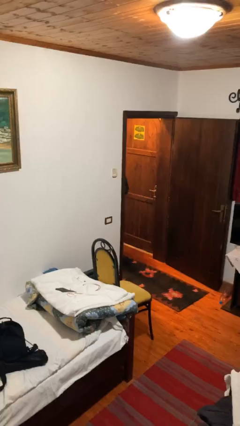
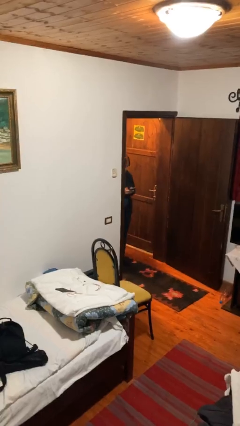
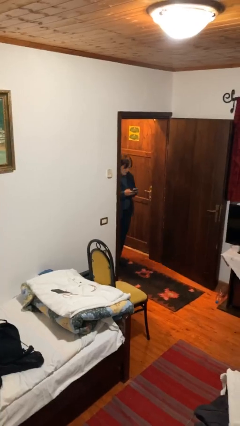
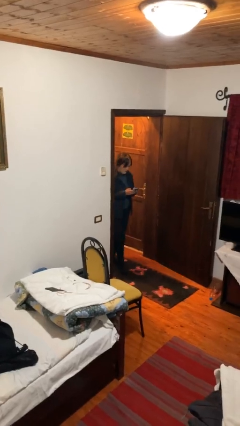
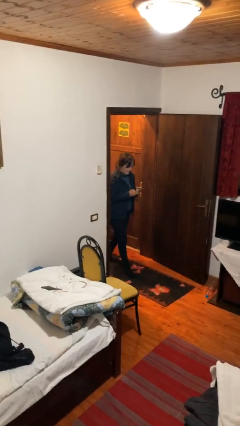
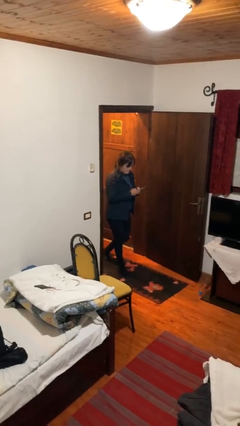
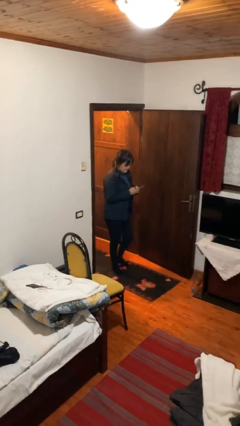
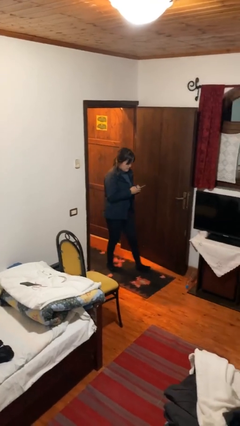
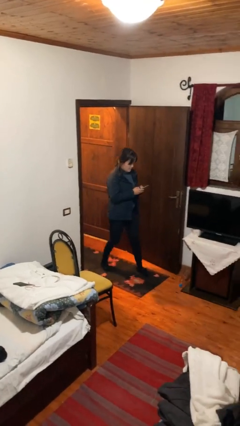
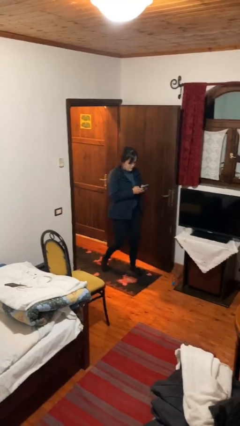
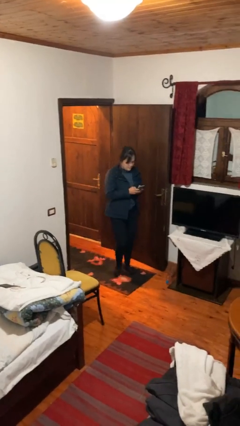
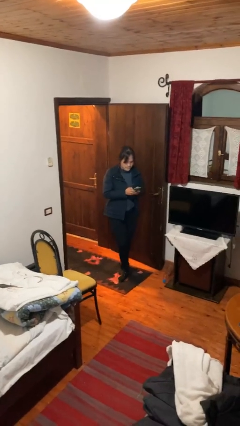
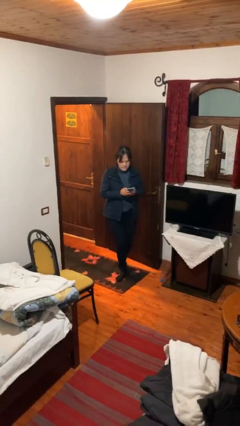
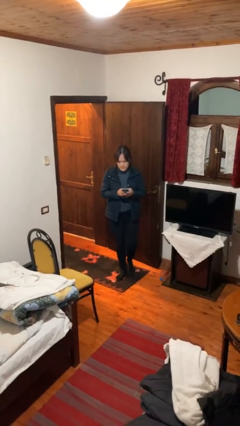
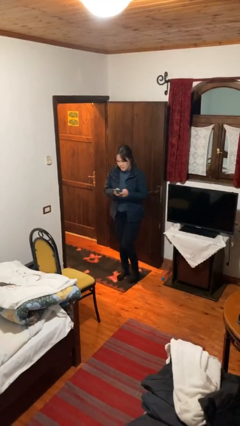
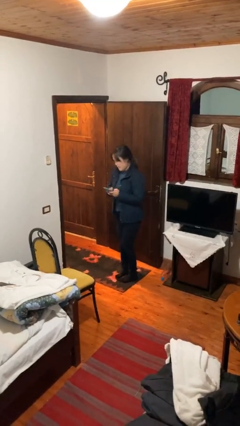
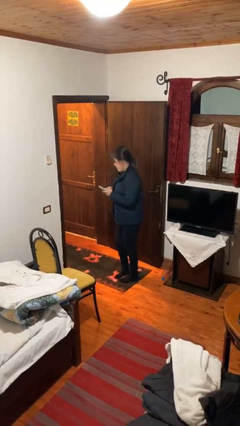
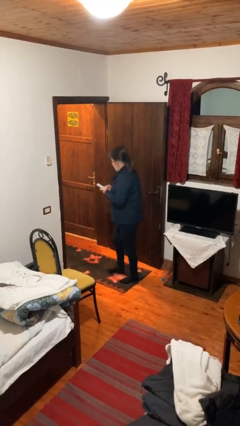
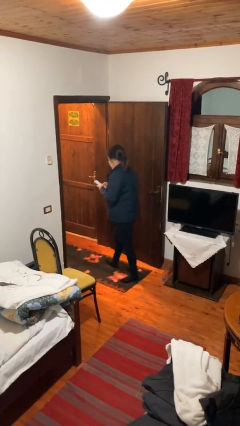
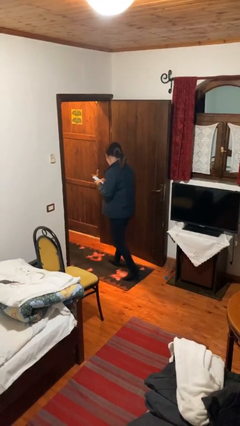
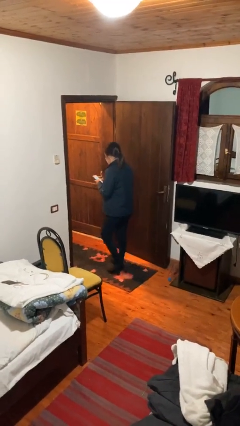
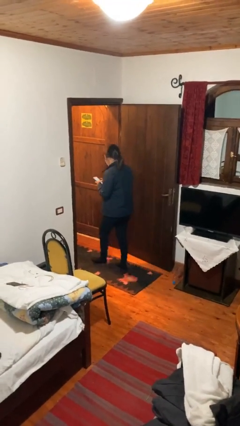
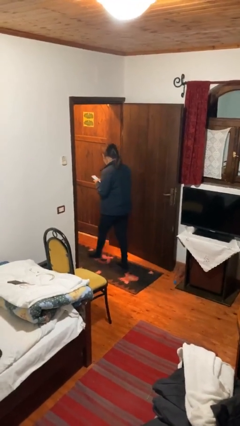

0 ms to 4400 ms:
person enters scene through structure

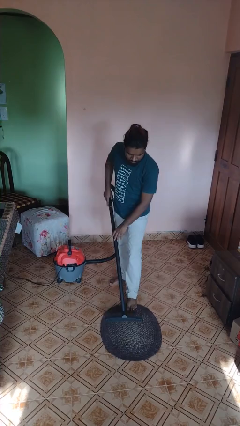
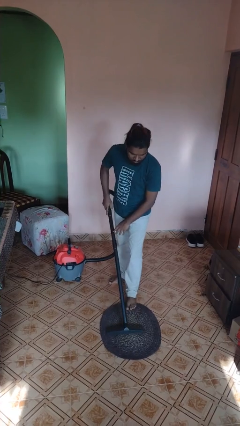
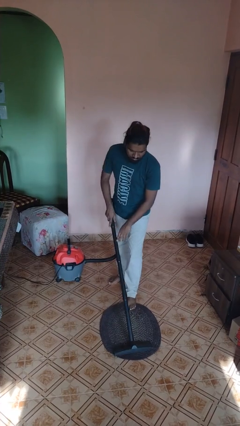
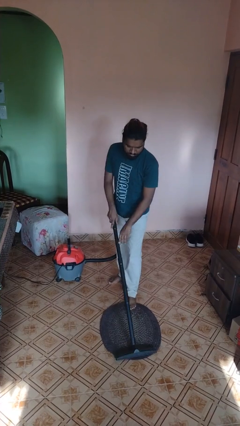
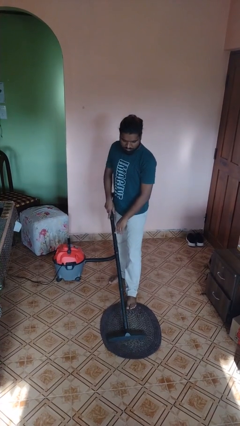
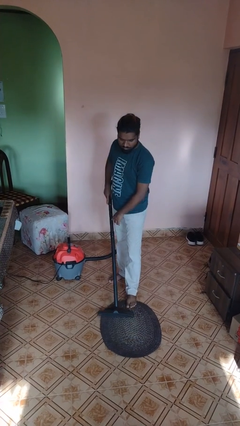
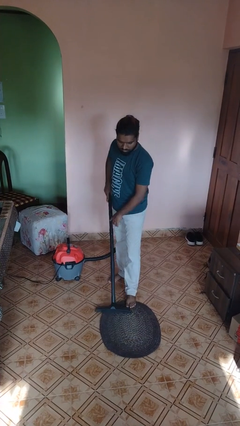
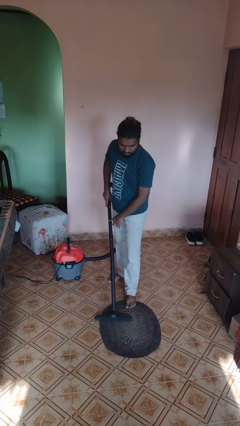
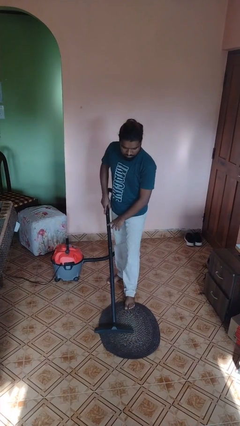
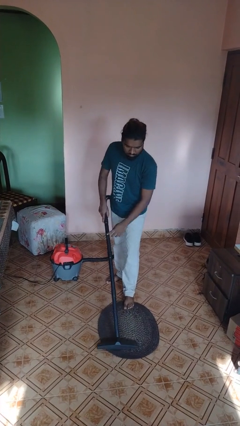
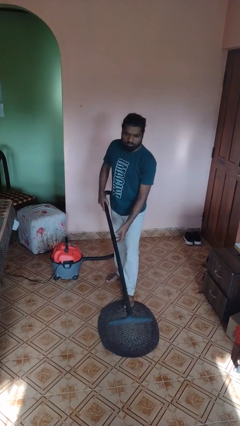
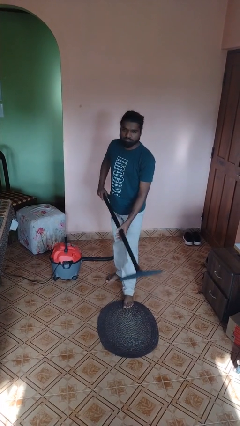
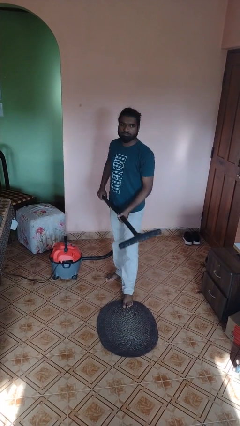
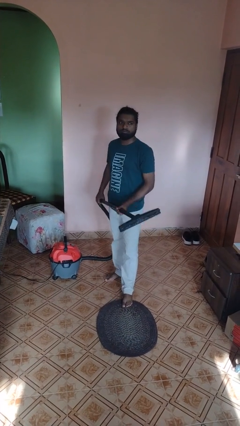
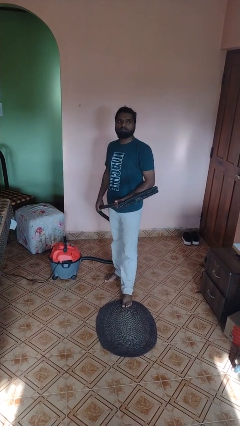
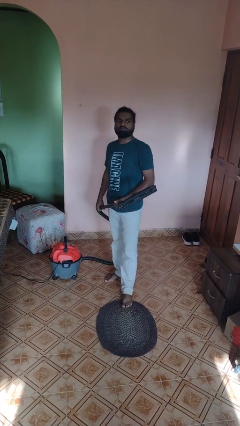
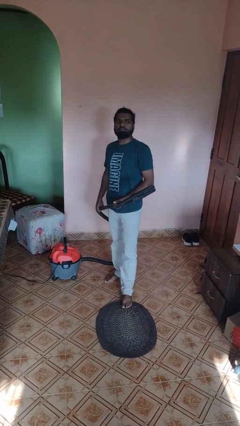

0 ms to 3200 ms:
person vacuums carpet

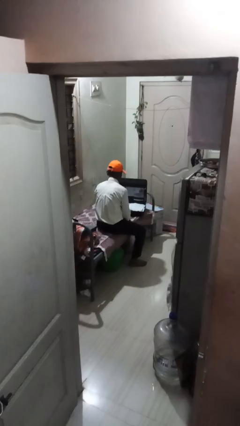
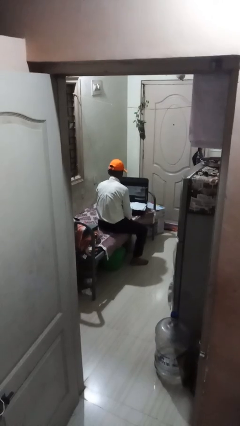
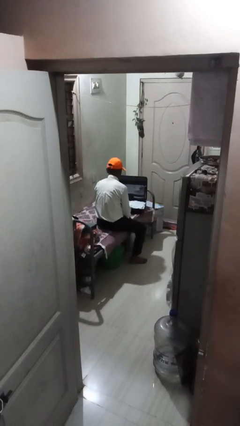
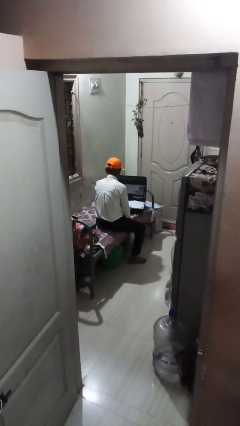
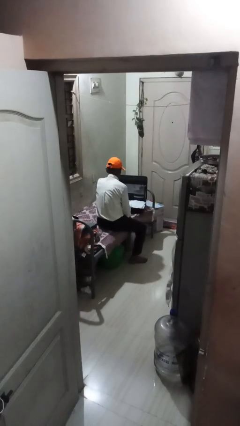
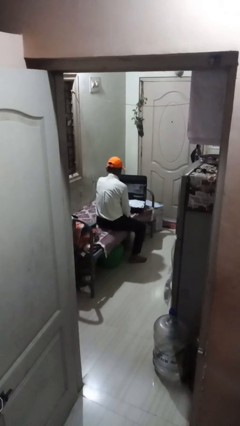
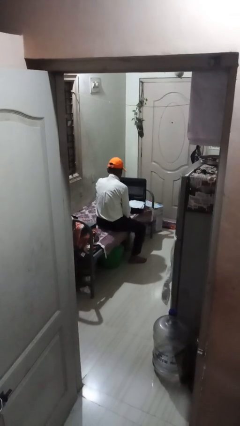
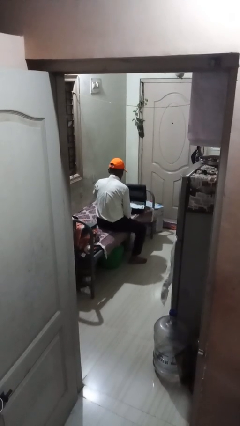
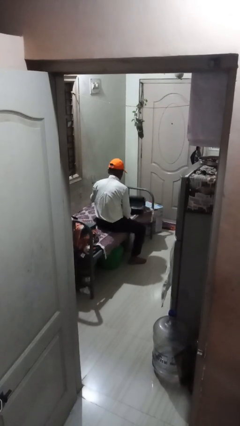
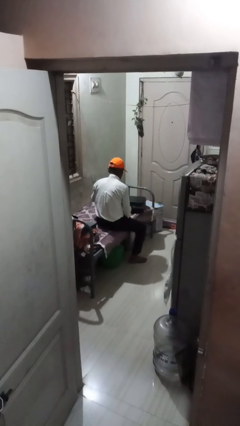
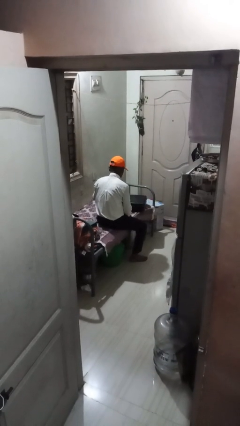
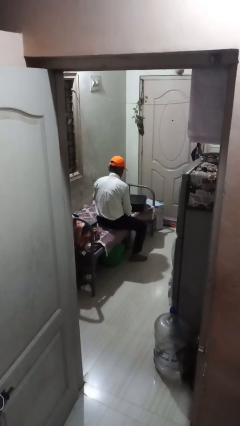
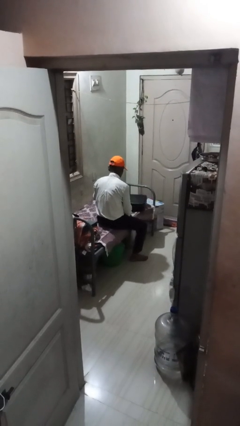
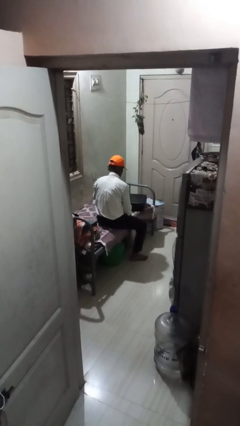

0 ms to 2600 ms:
person closes suitcase

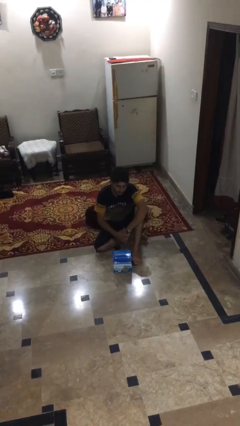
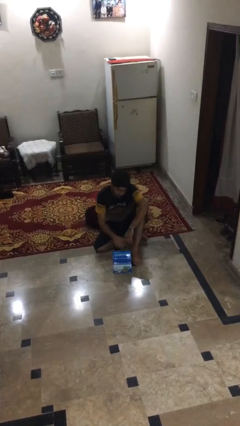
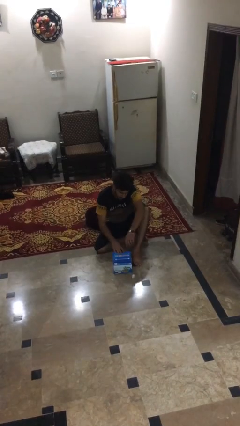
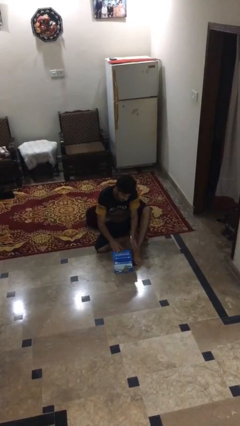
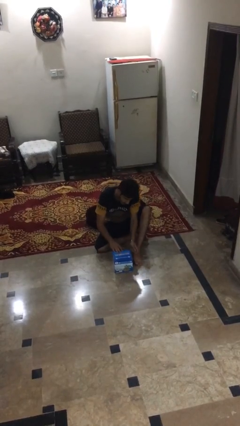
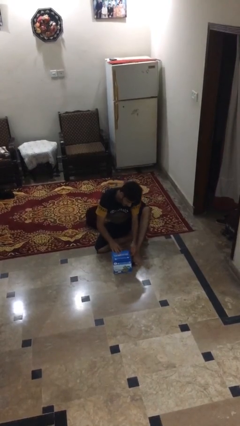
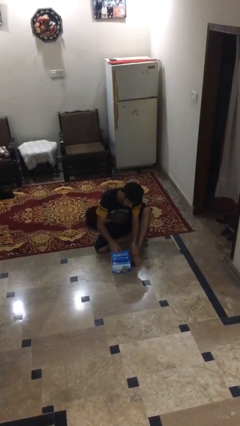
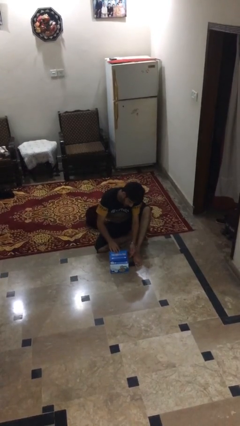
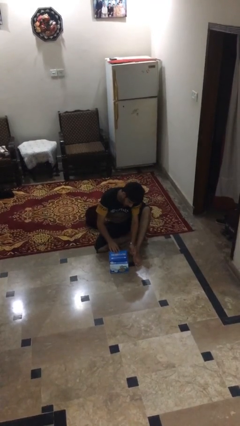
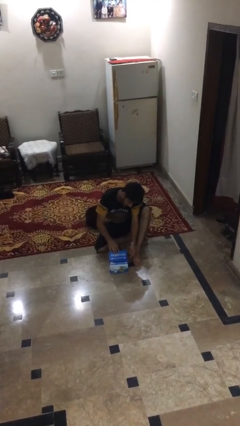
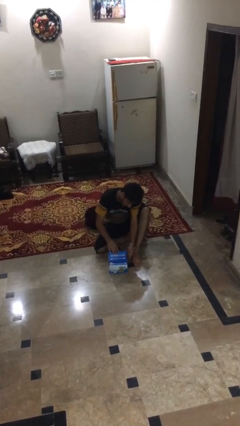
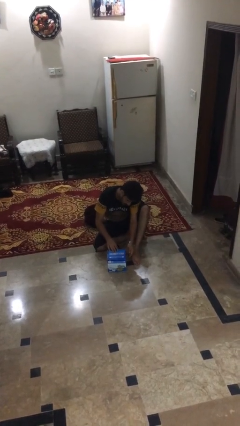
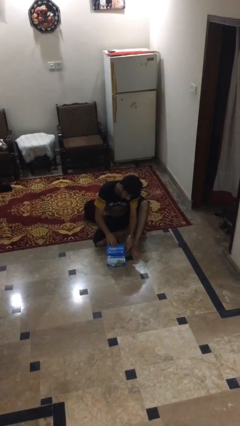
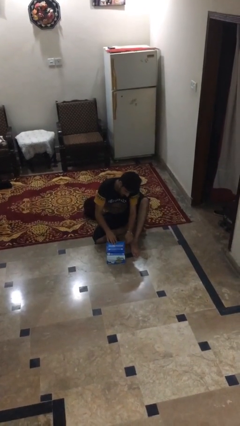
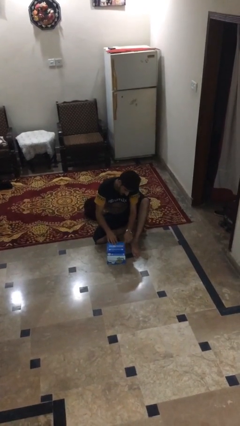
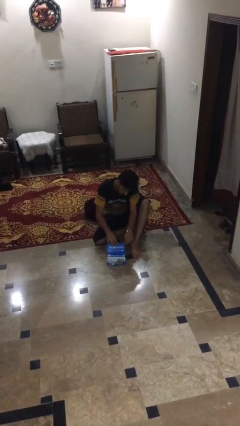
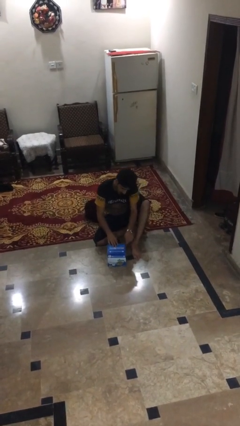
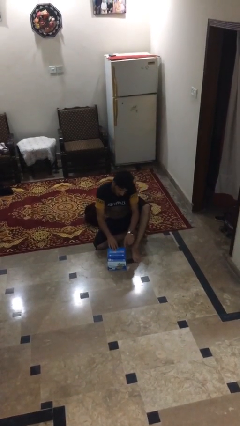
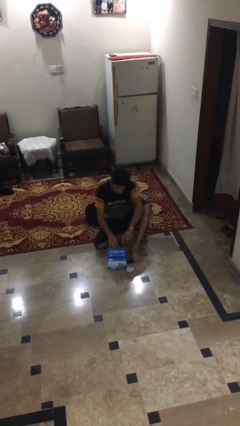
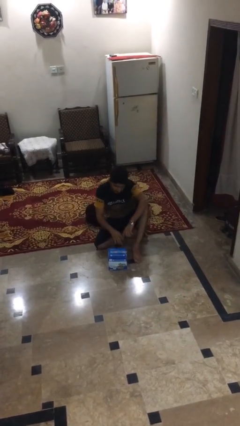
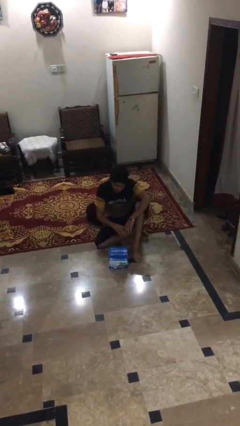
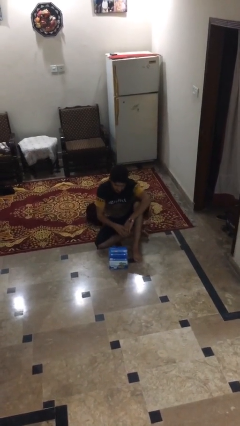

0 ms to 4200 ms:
person taps object with finger

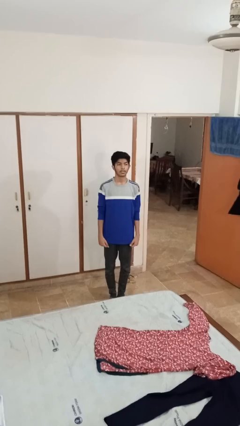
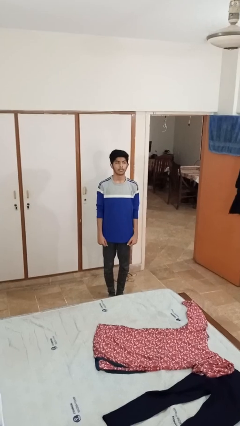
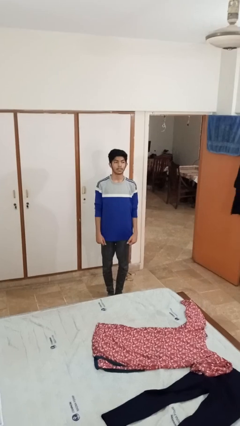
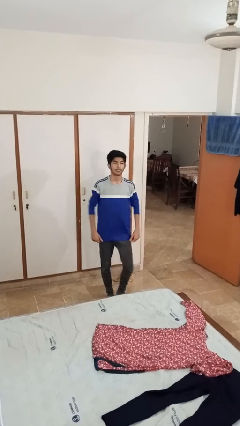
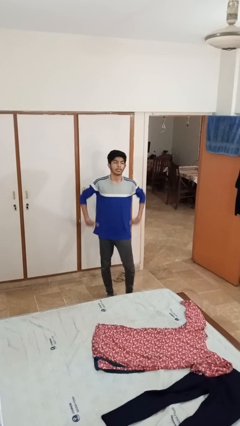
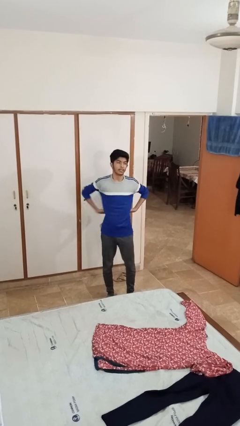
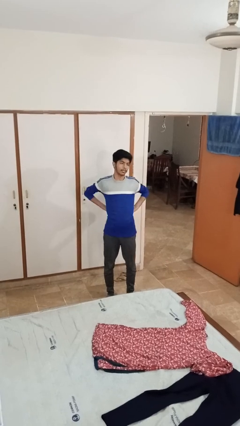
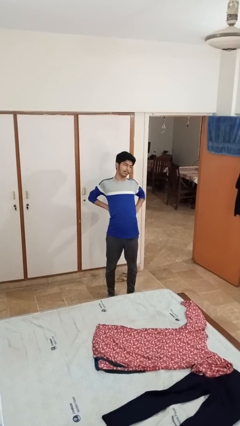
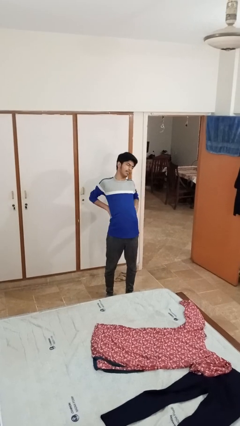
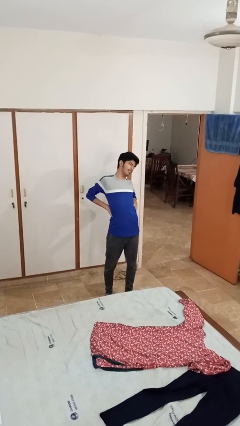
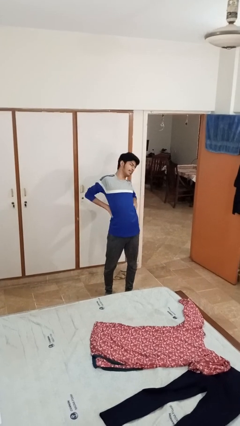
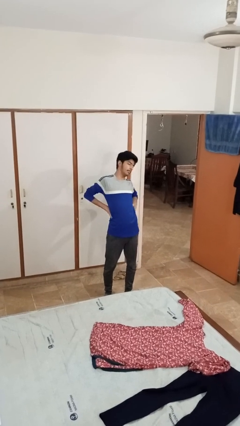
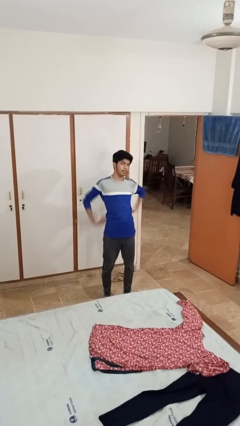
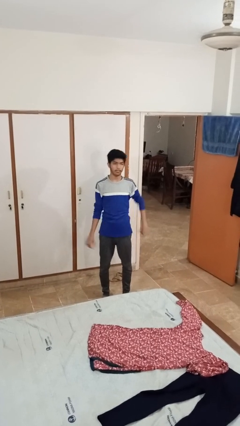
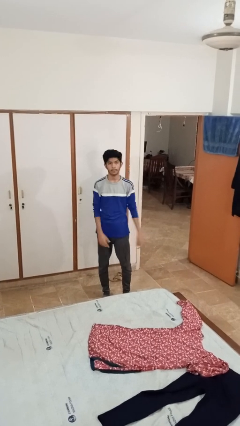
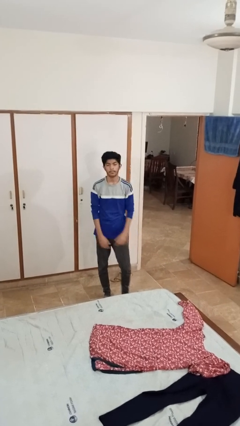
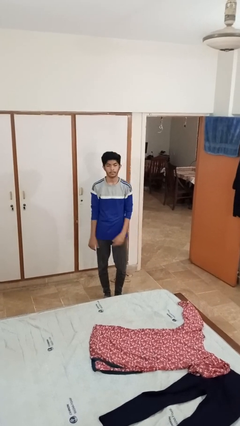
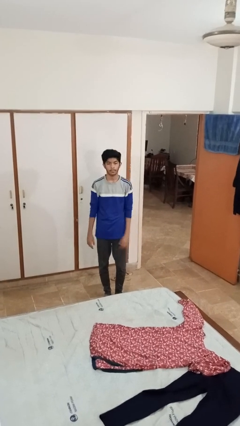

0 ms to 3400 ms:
person stretches back
